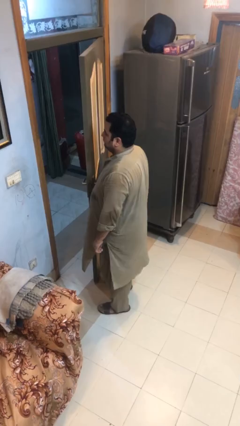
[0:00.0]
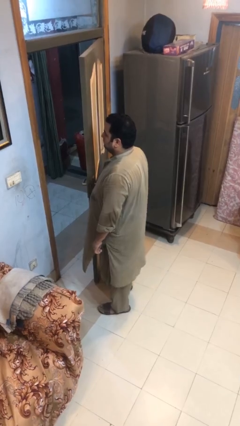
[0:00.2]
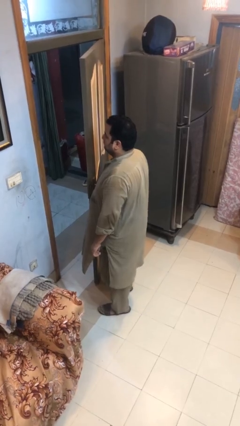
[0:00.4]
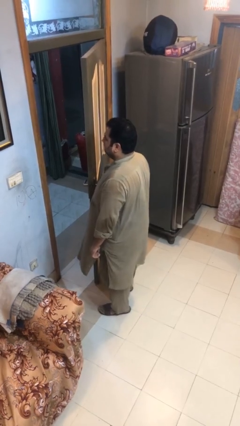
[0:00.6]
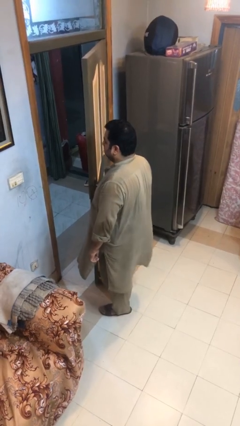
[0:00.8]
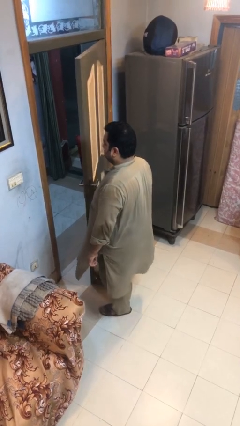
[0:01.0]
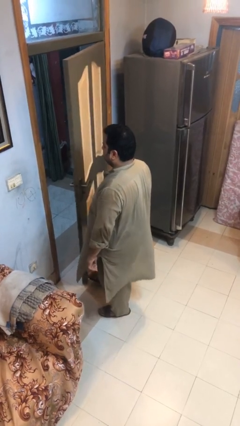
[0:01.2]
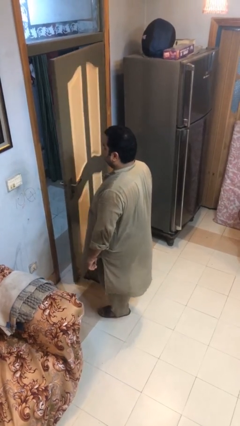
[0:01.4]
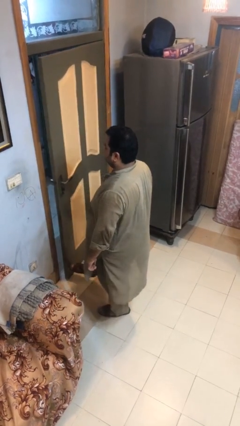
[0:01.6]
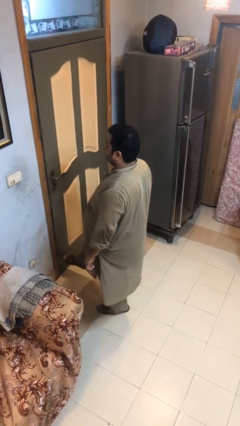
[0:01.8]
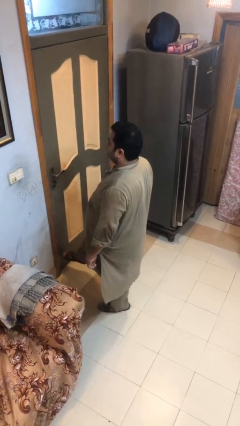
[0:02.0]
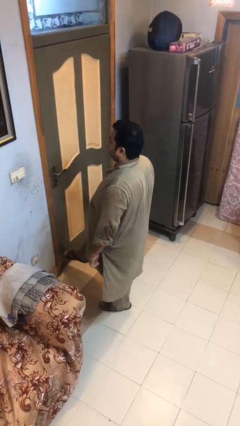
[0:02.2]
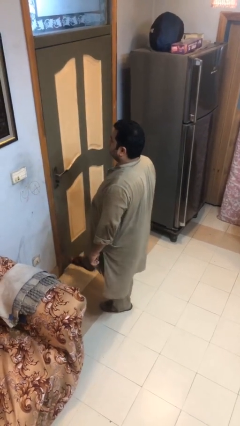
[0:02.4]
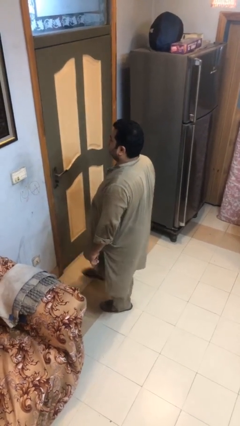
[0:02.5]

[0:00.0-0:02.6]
person closes door with foot

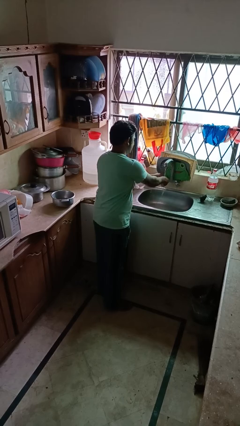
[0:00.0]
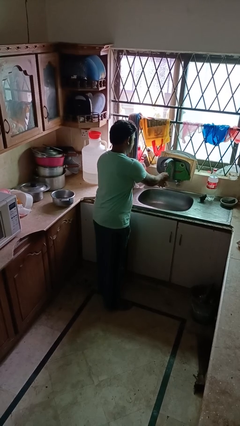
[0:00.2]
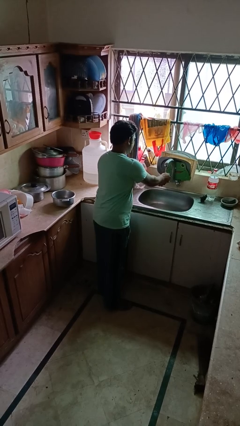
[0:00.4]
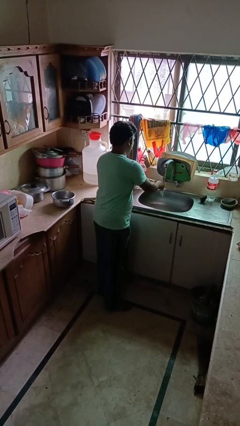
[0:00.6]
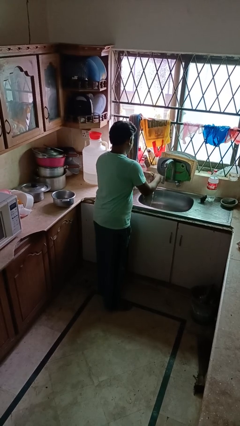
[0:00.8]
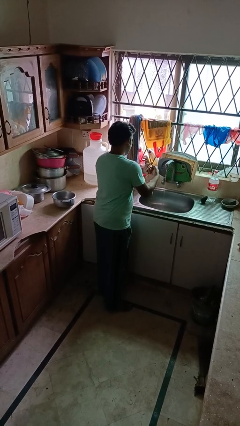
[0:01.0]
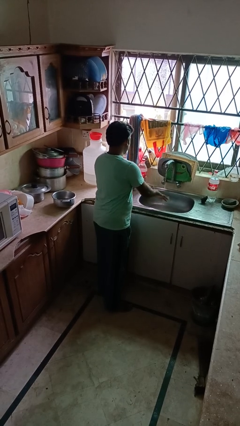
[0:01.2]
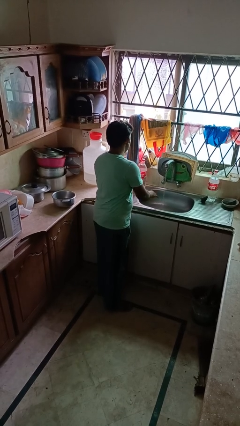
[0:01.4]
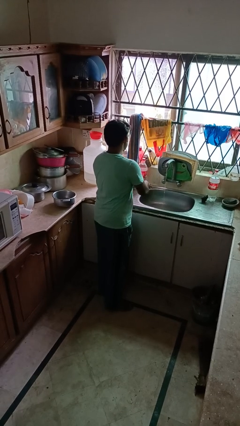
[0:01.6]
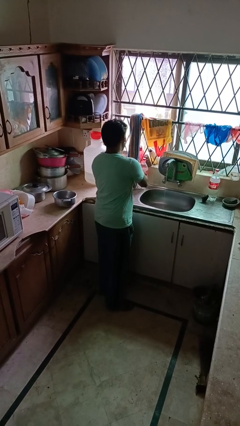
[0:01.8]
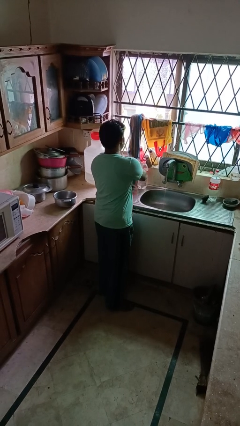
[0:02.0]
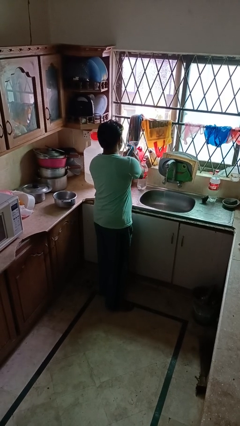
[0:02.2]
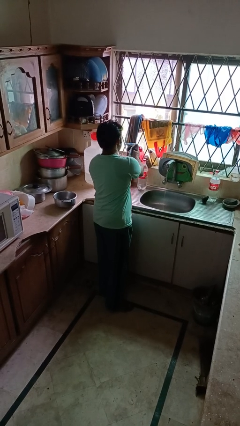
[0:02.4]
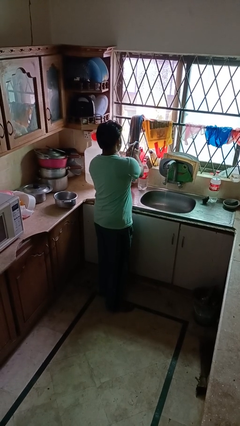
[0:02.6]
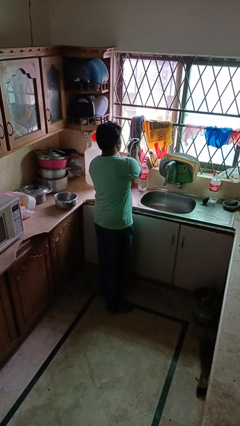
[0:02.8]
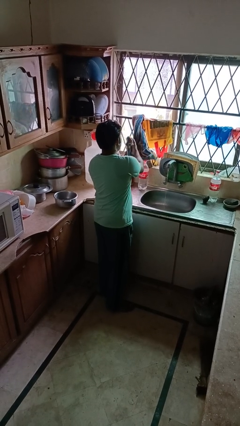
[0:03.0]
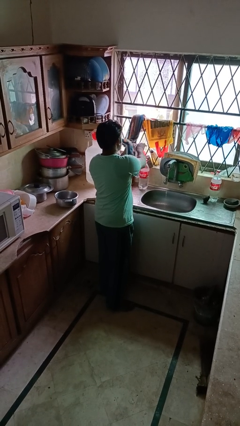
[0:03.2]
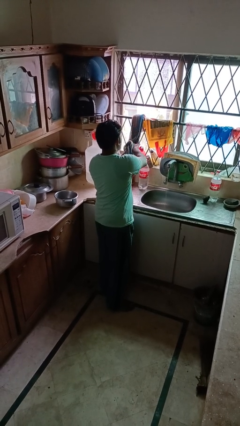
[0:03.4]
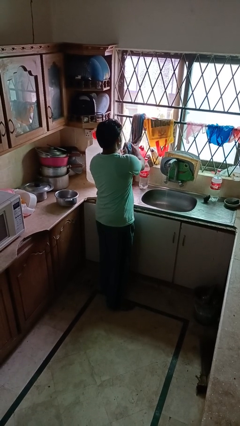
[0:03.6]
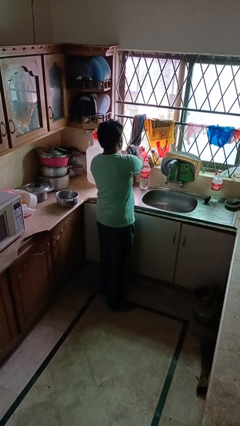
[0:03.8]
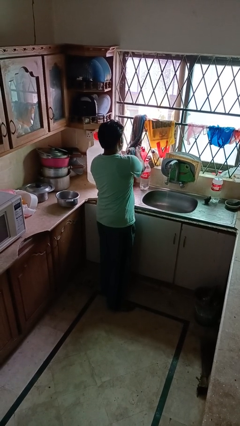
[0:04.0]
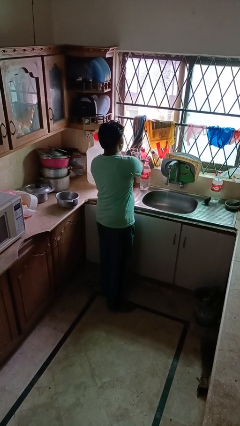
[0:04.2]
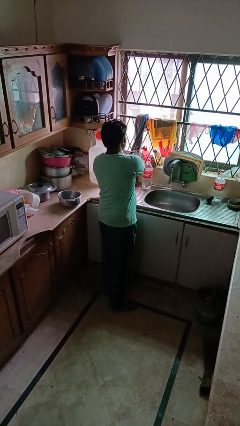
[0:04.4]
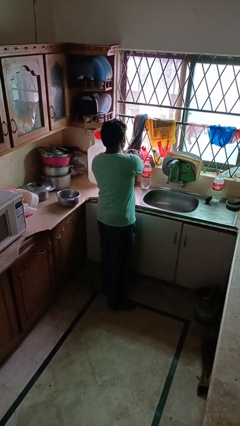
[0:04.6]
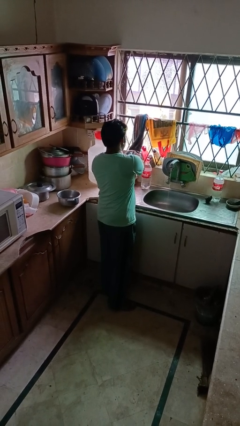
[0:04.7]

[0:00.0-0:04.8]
person dries hands with towel

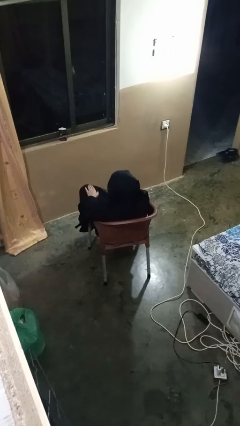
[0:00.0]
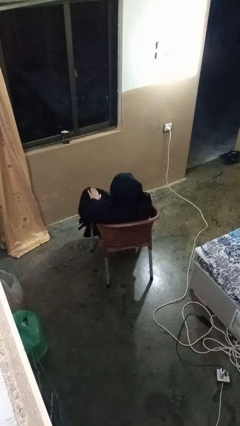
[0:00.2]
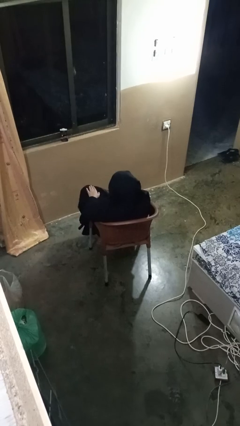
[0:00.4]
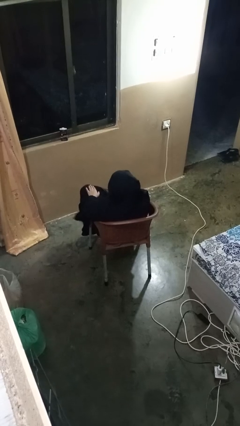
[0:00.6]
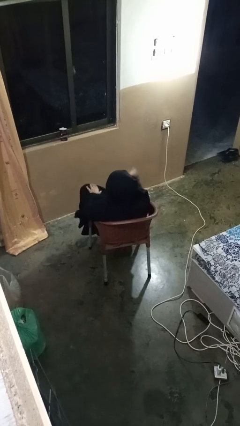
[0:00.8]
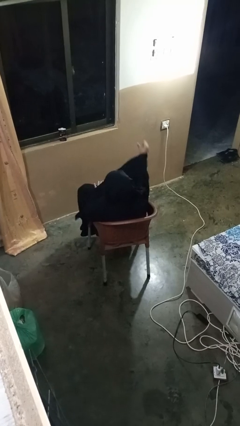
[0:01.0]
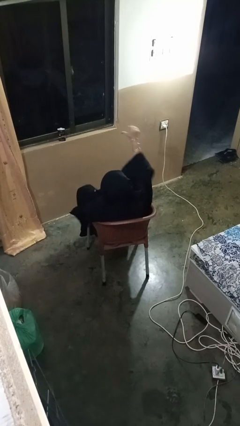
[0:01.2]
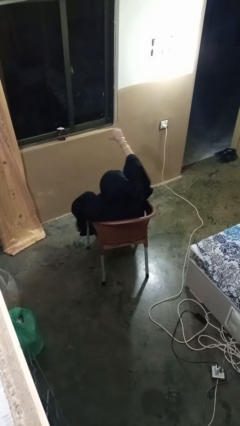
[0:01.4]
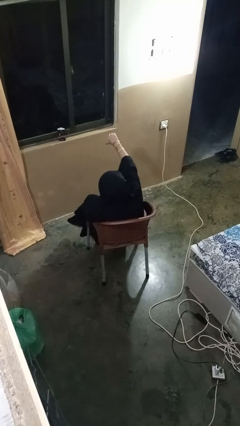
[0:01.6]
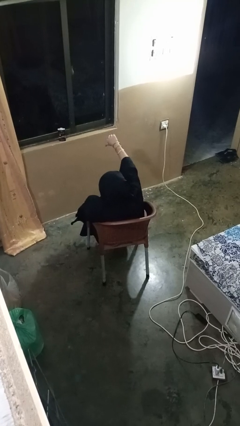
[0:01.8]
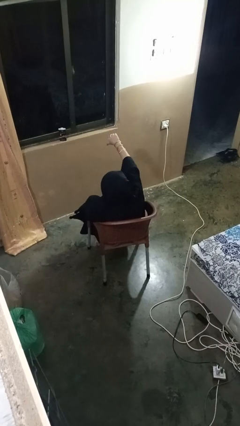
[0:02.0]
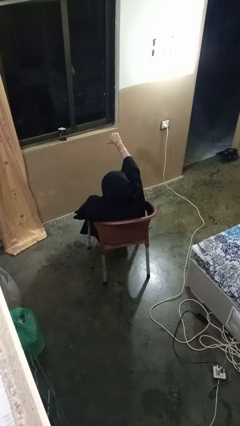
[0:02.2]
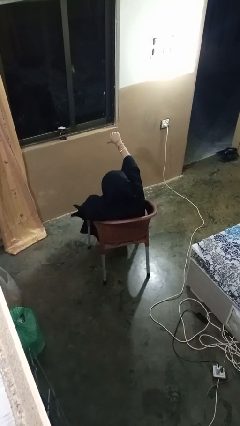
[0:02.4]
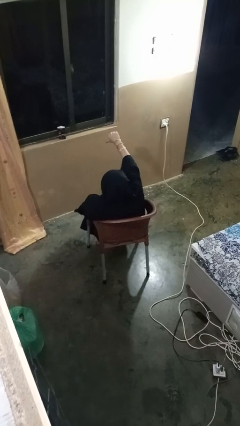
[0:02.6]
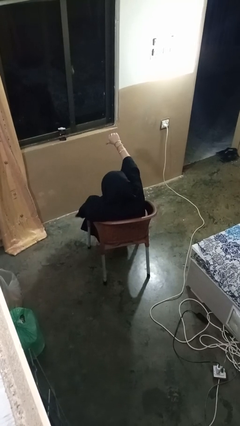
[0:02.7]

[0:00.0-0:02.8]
person gestures thumbs down

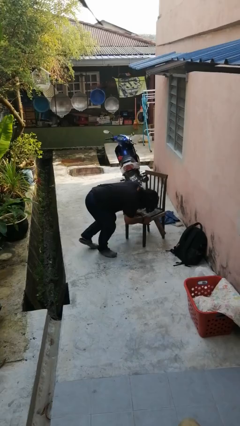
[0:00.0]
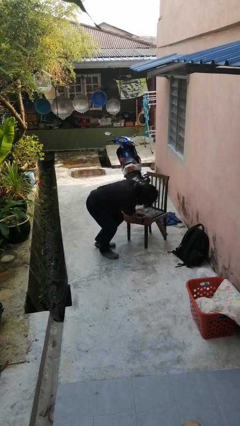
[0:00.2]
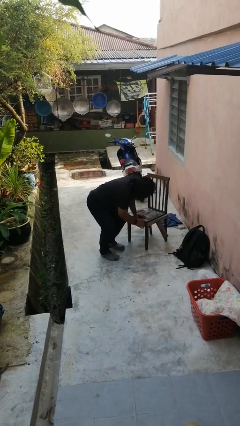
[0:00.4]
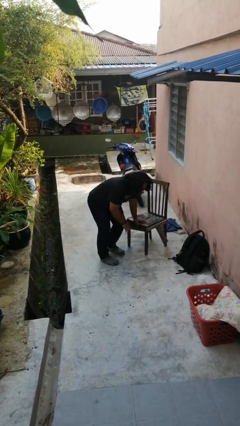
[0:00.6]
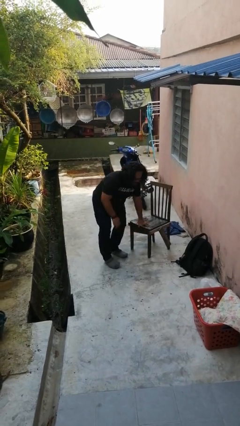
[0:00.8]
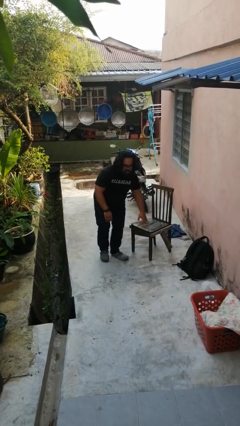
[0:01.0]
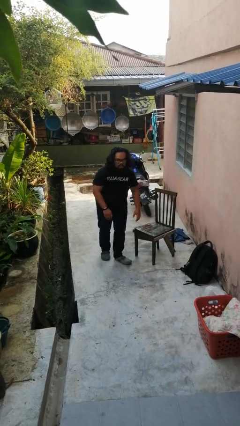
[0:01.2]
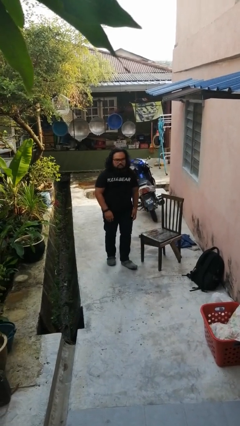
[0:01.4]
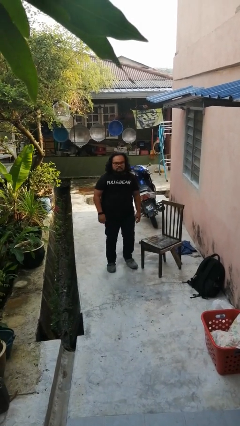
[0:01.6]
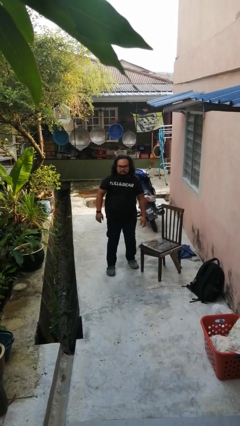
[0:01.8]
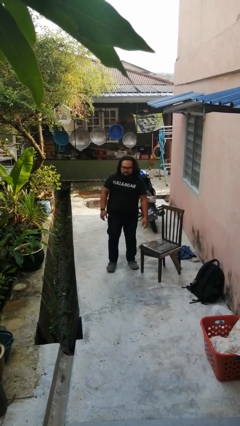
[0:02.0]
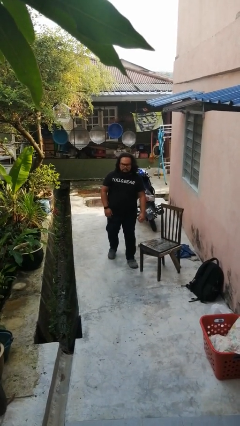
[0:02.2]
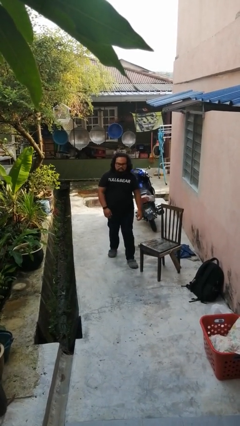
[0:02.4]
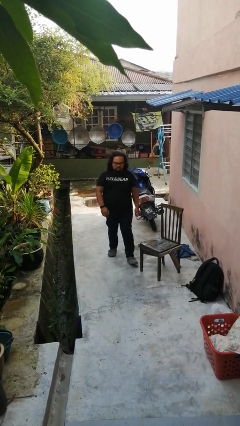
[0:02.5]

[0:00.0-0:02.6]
person stands up from floor

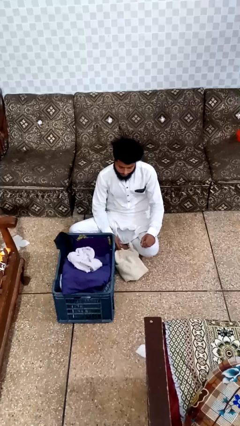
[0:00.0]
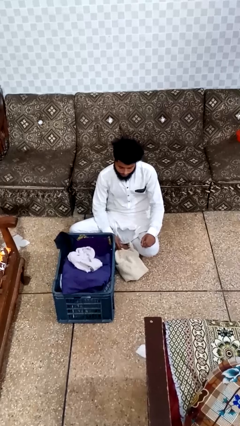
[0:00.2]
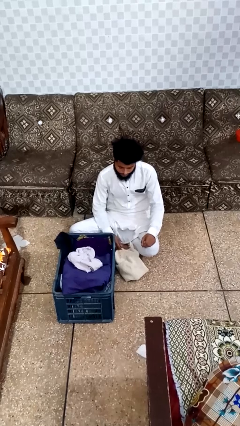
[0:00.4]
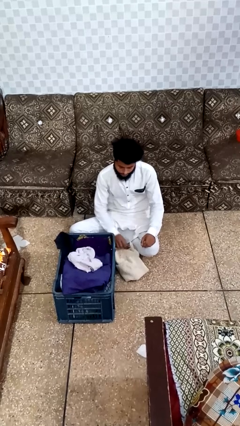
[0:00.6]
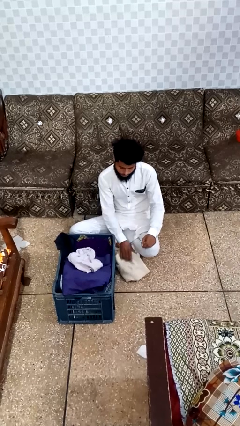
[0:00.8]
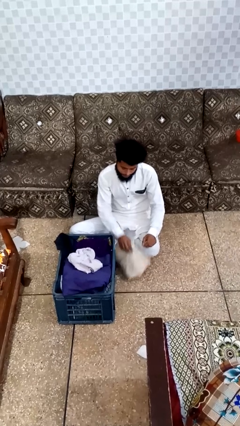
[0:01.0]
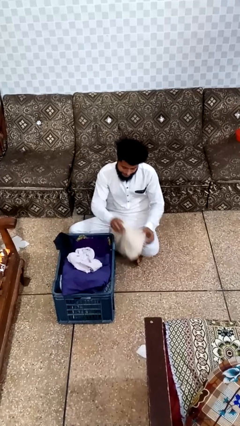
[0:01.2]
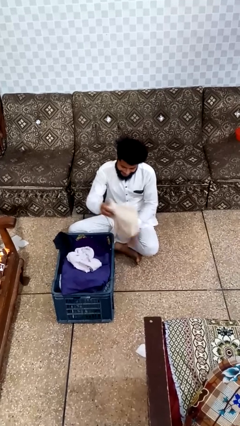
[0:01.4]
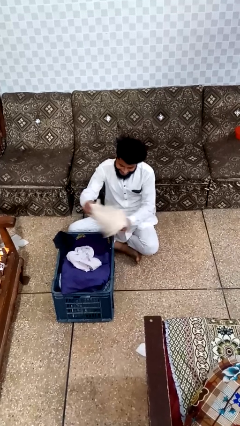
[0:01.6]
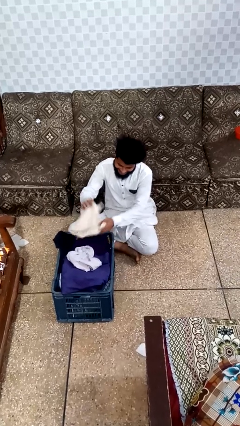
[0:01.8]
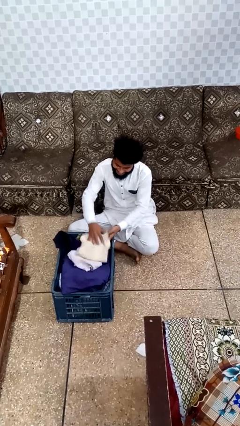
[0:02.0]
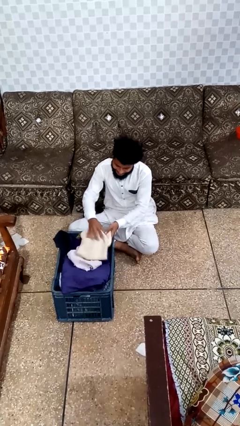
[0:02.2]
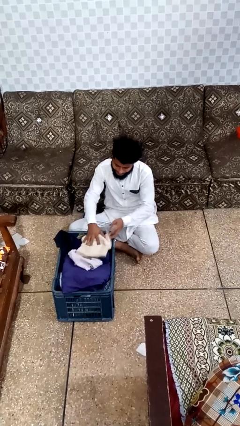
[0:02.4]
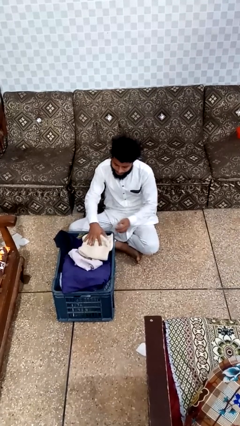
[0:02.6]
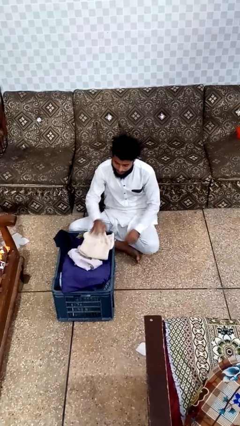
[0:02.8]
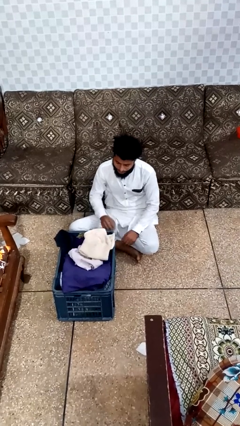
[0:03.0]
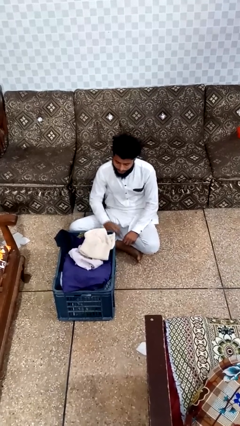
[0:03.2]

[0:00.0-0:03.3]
person takes object from basket

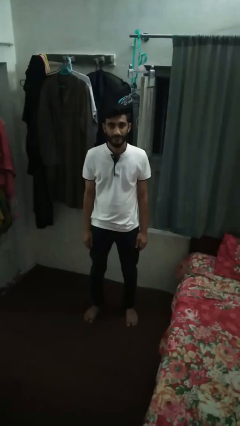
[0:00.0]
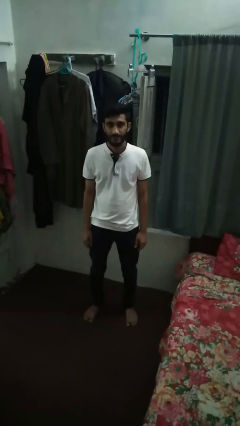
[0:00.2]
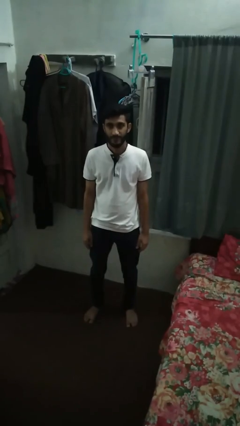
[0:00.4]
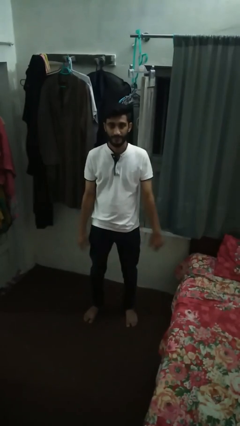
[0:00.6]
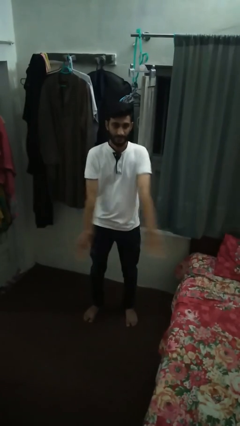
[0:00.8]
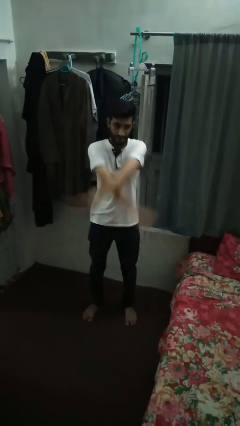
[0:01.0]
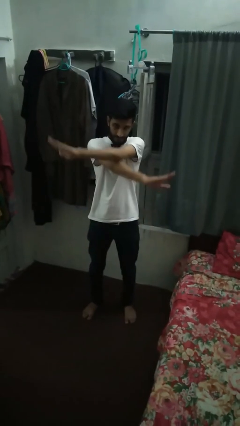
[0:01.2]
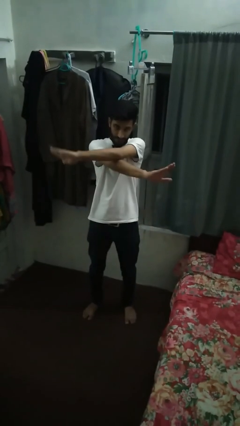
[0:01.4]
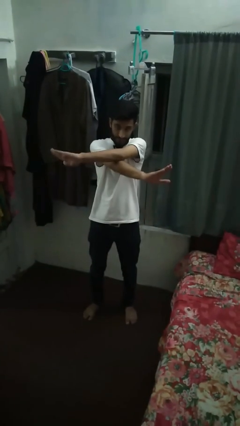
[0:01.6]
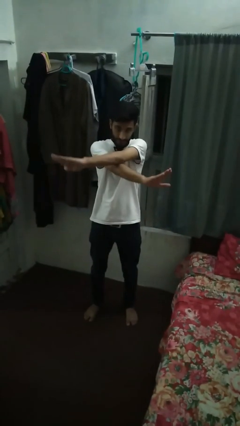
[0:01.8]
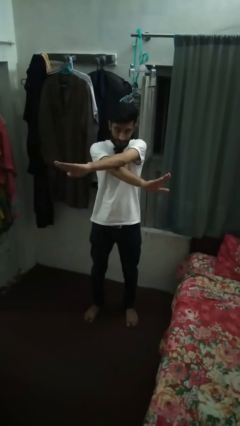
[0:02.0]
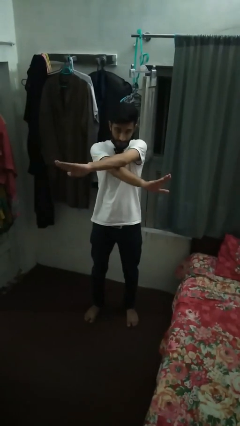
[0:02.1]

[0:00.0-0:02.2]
person gestures arms x
